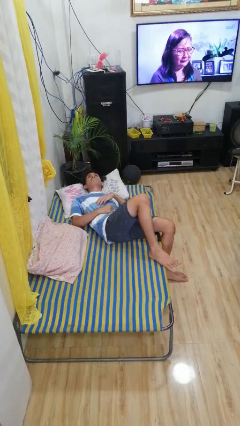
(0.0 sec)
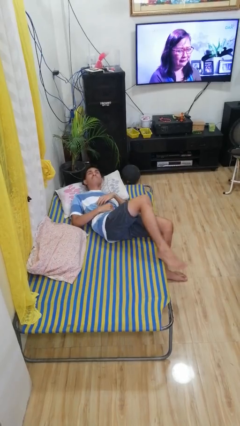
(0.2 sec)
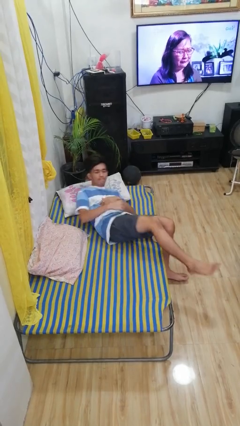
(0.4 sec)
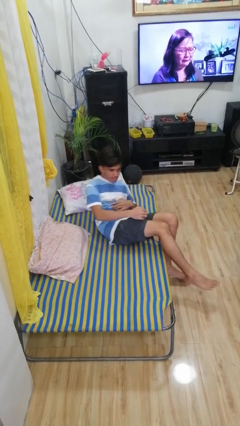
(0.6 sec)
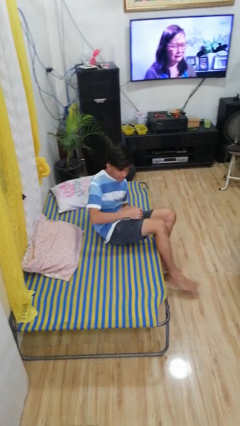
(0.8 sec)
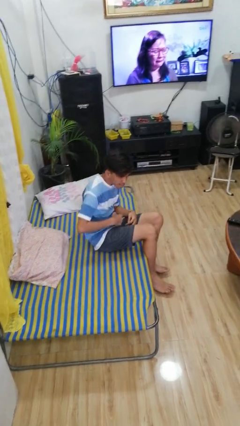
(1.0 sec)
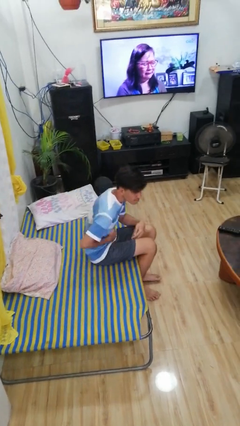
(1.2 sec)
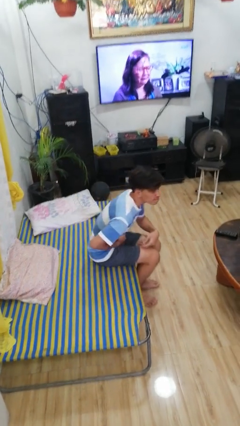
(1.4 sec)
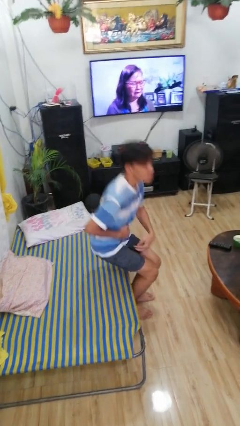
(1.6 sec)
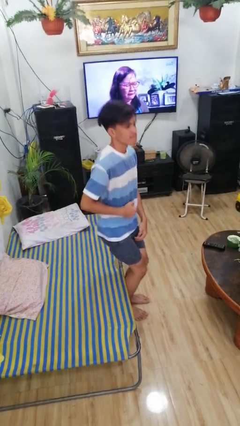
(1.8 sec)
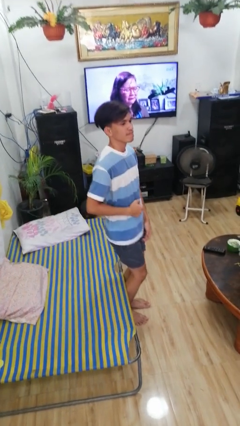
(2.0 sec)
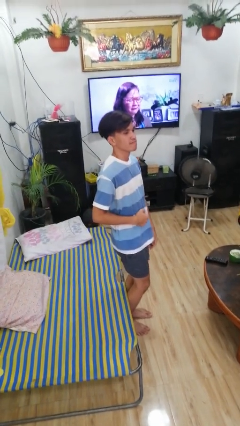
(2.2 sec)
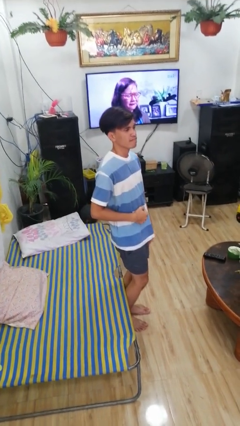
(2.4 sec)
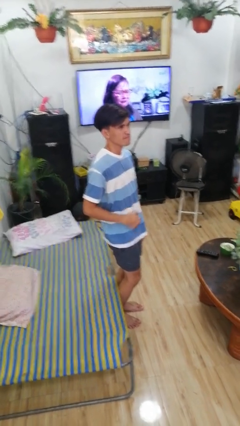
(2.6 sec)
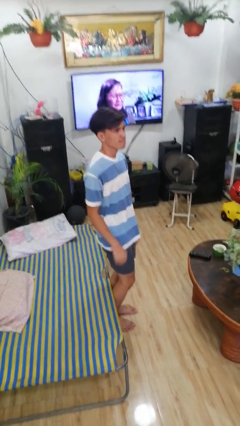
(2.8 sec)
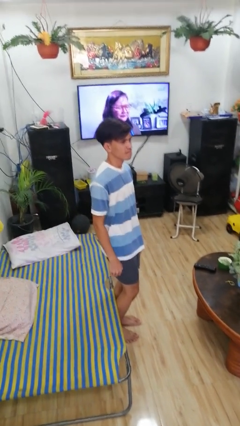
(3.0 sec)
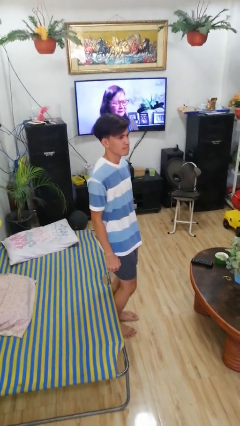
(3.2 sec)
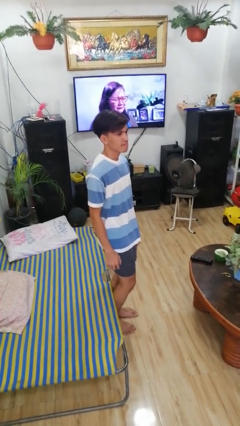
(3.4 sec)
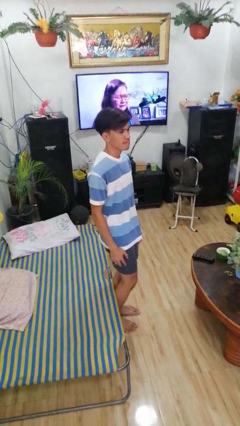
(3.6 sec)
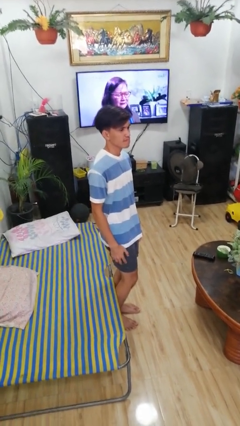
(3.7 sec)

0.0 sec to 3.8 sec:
person stands up

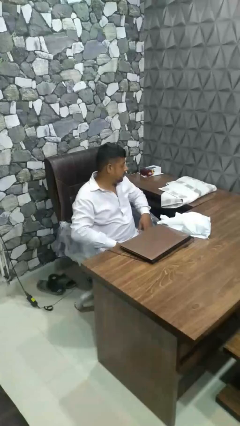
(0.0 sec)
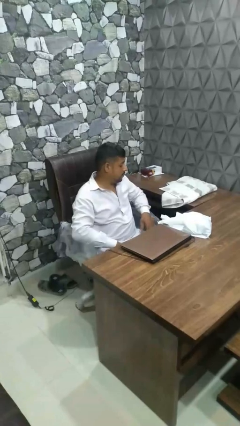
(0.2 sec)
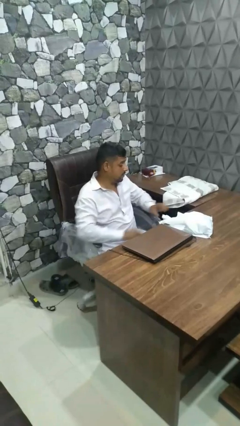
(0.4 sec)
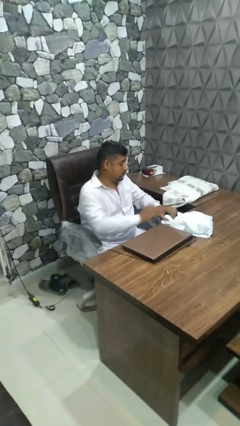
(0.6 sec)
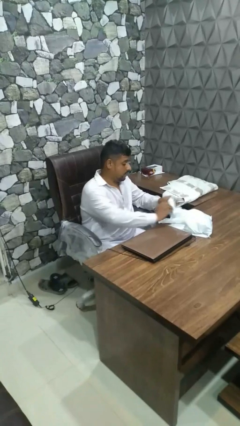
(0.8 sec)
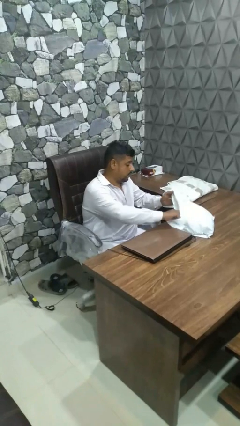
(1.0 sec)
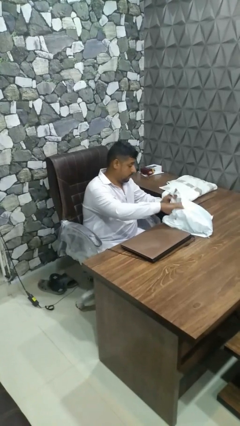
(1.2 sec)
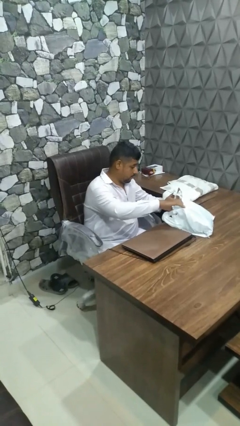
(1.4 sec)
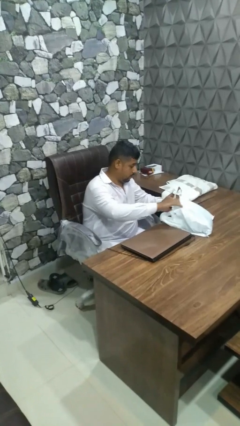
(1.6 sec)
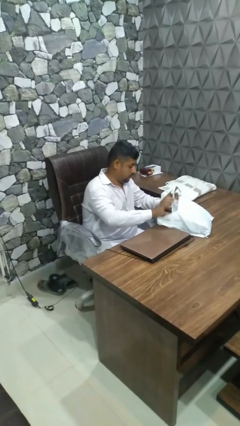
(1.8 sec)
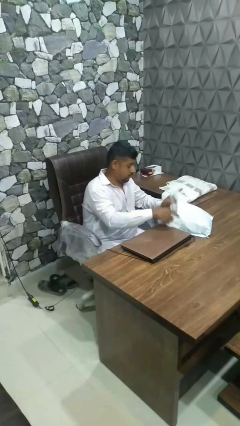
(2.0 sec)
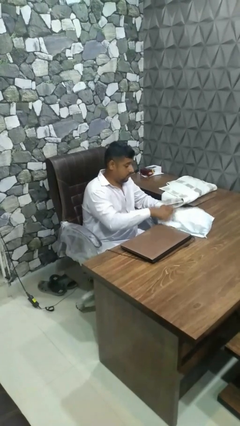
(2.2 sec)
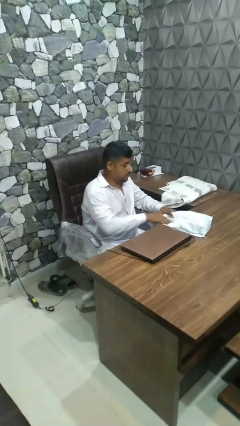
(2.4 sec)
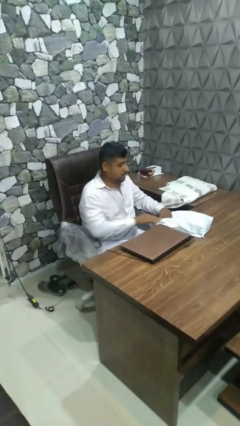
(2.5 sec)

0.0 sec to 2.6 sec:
person searches in bag

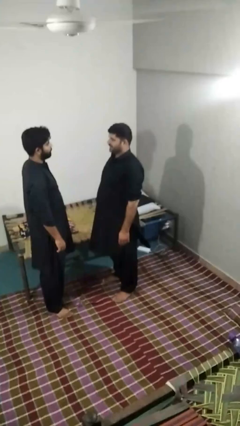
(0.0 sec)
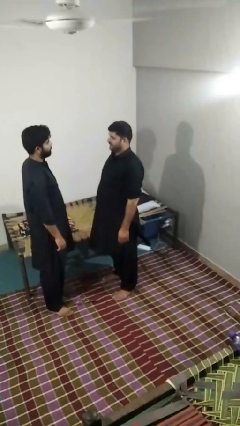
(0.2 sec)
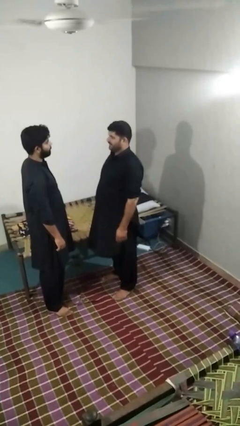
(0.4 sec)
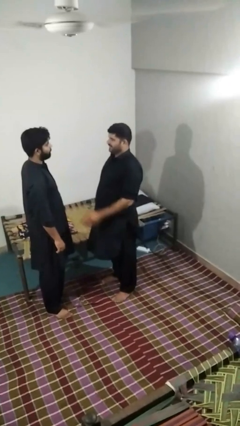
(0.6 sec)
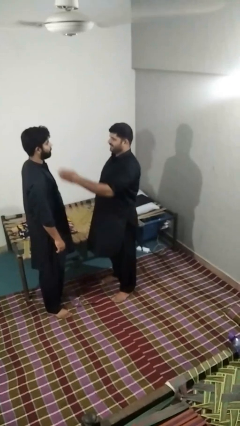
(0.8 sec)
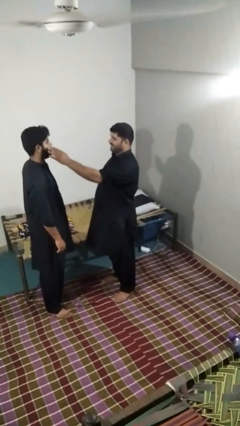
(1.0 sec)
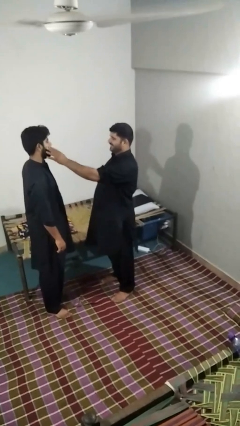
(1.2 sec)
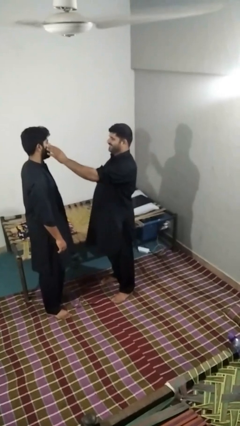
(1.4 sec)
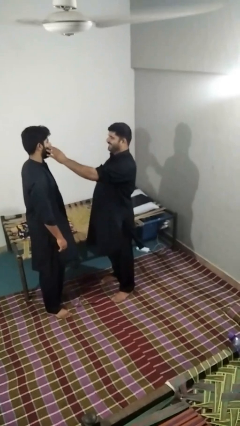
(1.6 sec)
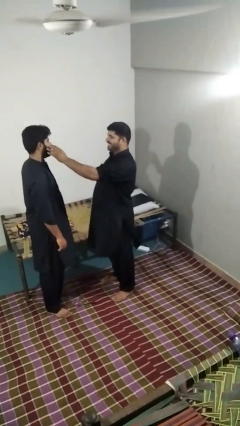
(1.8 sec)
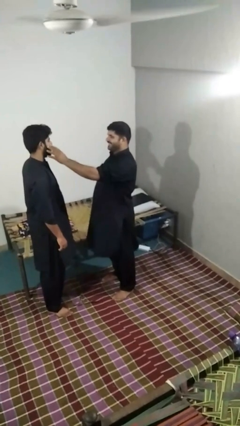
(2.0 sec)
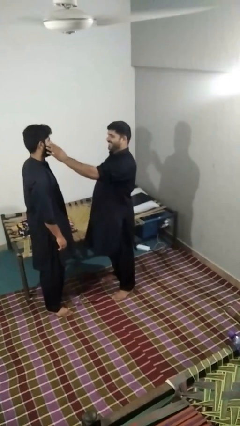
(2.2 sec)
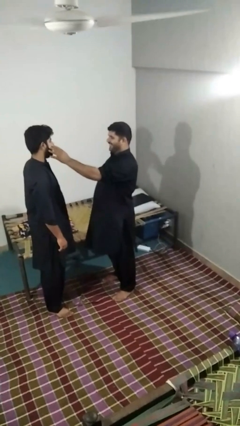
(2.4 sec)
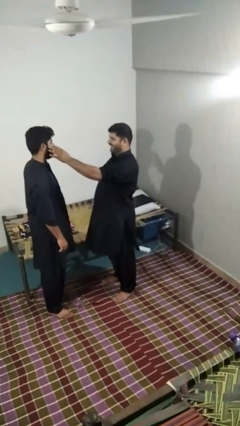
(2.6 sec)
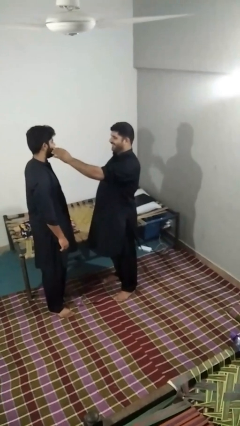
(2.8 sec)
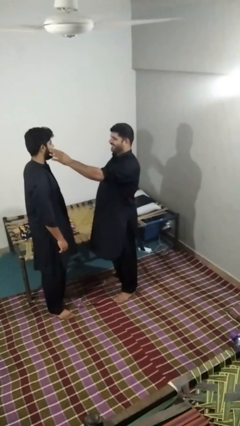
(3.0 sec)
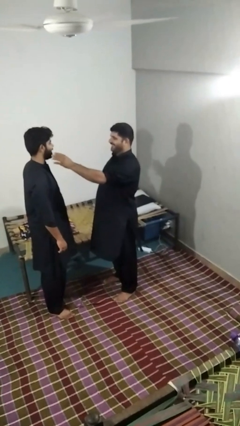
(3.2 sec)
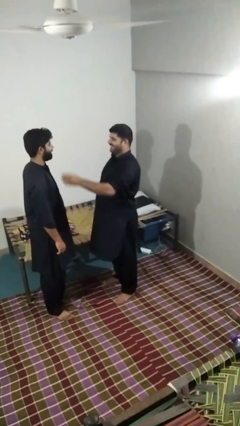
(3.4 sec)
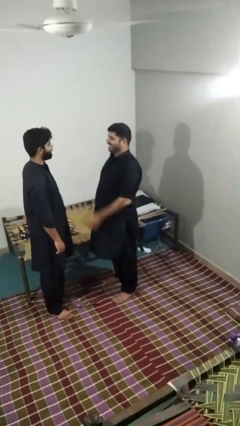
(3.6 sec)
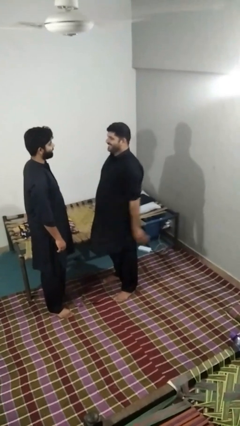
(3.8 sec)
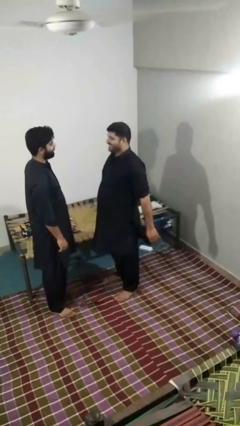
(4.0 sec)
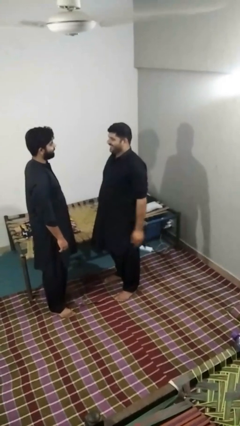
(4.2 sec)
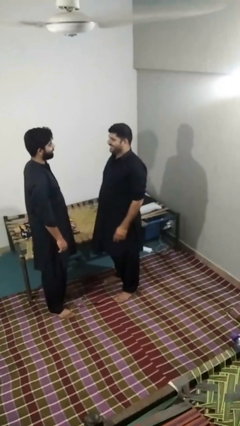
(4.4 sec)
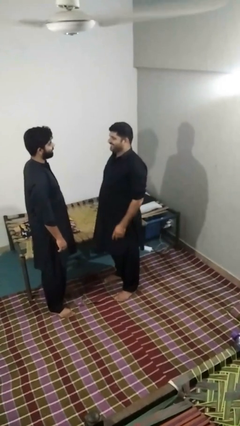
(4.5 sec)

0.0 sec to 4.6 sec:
person touches face of person

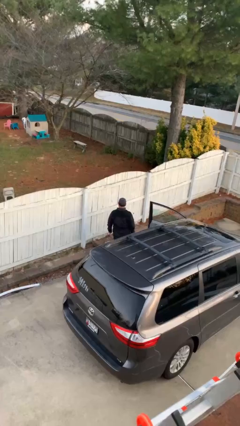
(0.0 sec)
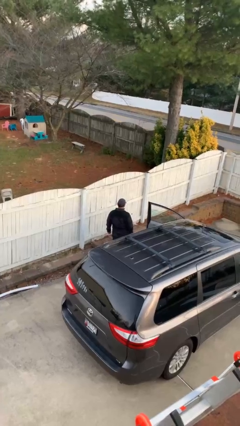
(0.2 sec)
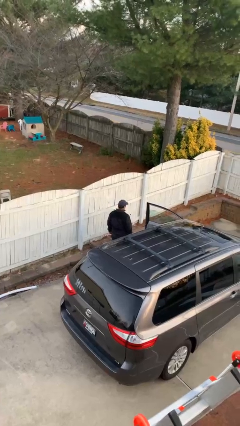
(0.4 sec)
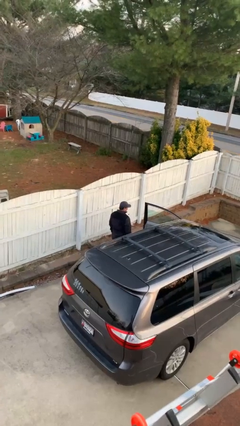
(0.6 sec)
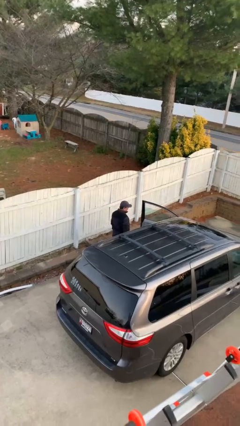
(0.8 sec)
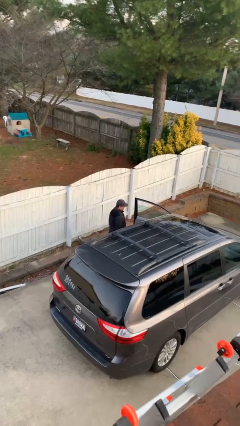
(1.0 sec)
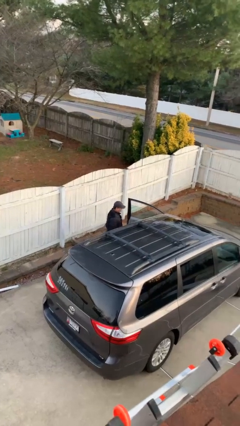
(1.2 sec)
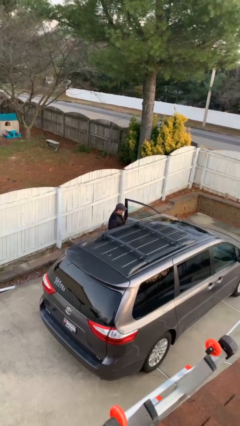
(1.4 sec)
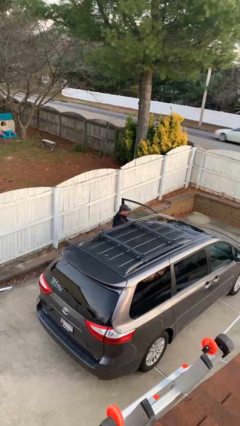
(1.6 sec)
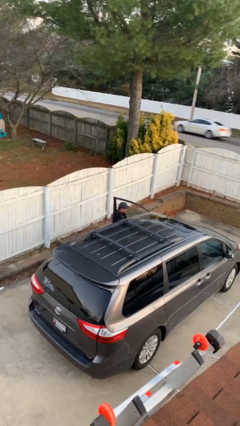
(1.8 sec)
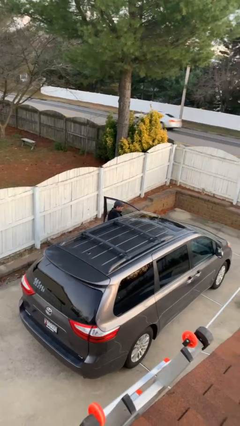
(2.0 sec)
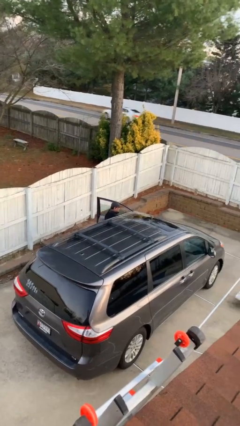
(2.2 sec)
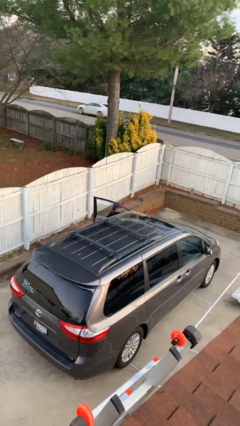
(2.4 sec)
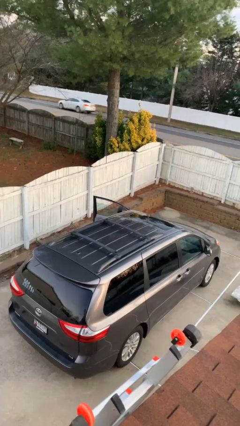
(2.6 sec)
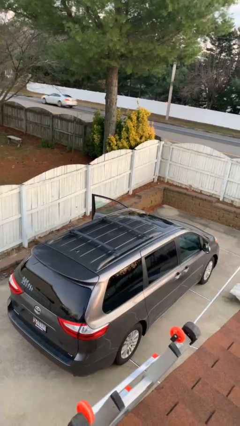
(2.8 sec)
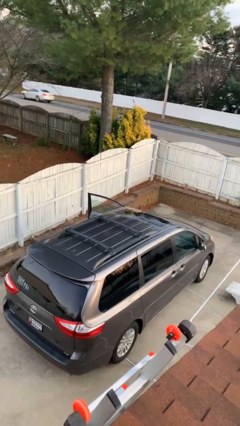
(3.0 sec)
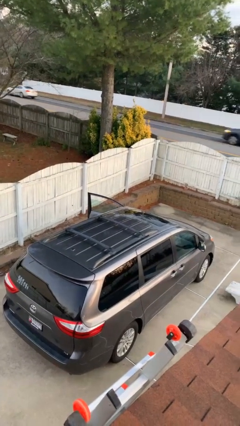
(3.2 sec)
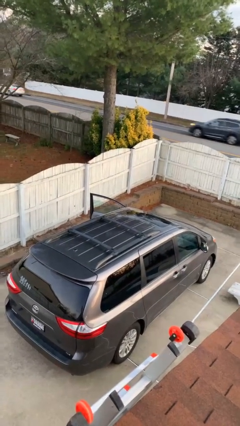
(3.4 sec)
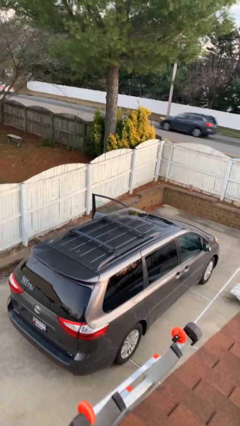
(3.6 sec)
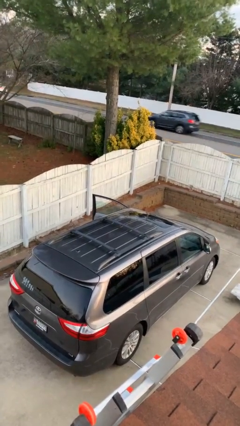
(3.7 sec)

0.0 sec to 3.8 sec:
person enters car

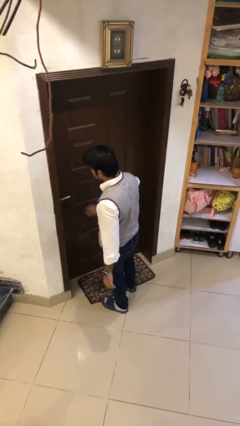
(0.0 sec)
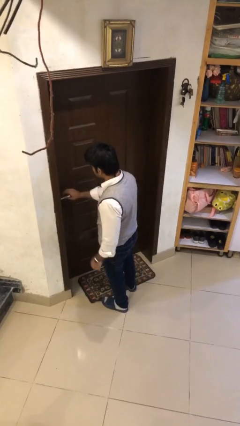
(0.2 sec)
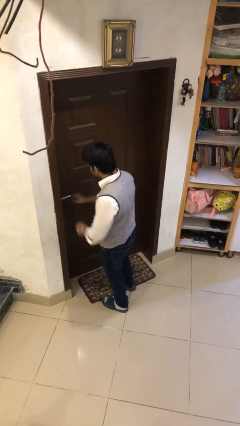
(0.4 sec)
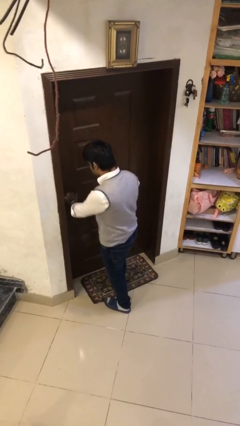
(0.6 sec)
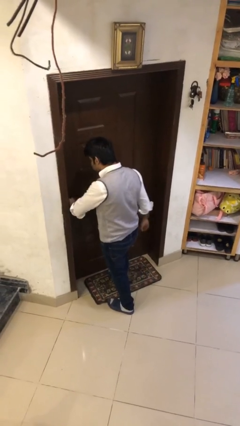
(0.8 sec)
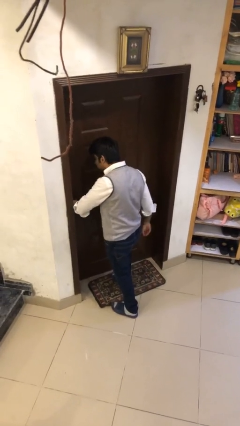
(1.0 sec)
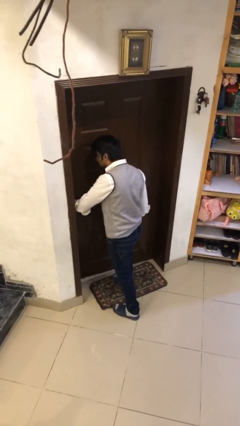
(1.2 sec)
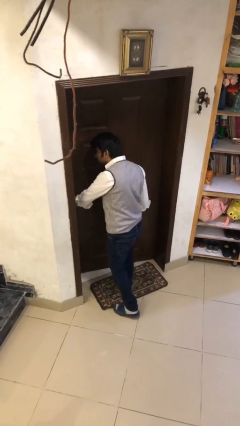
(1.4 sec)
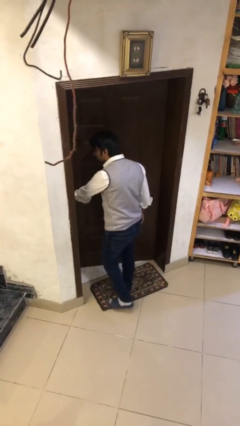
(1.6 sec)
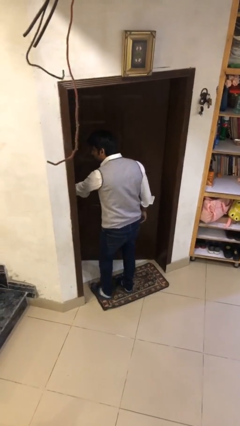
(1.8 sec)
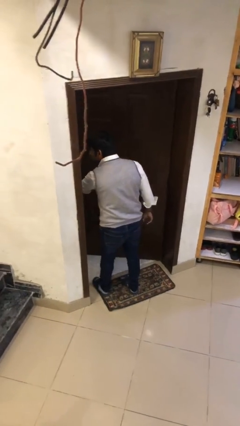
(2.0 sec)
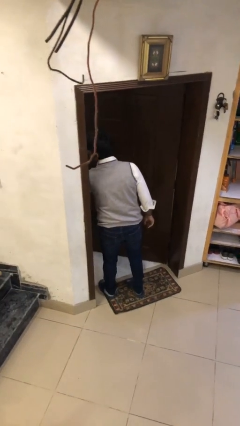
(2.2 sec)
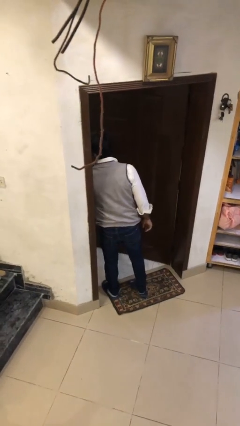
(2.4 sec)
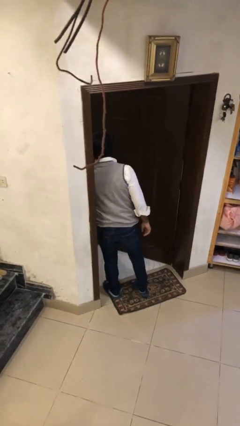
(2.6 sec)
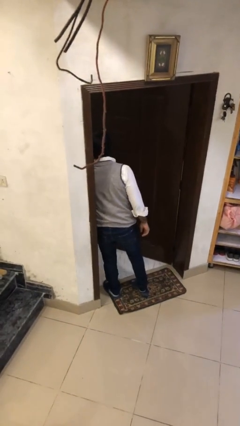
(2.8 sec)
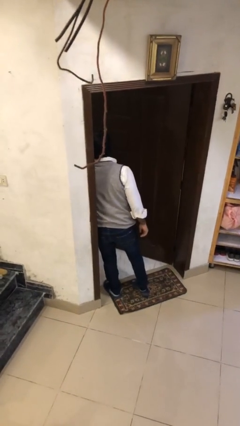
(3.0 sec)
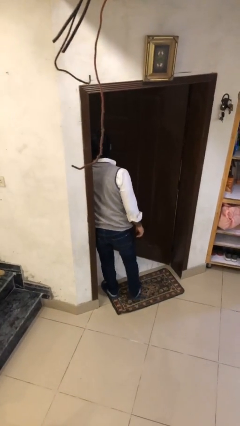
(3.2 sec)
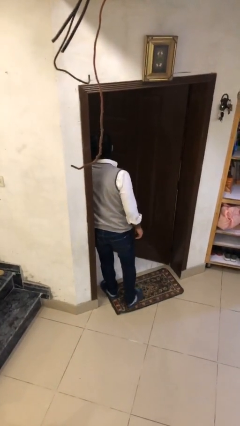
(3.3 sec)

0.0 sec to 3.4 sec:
person opens facility door
